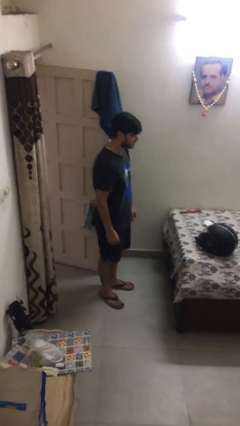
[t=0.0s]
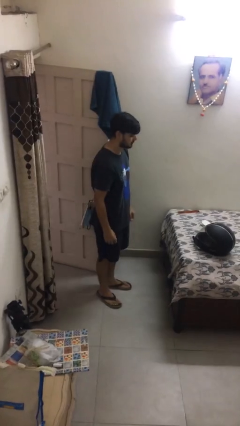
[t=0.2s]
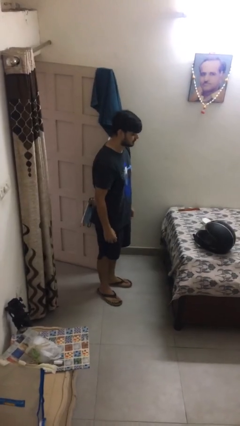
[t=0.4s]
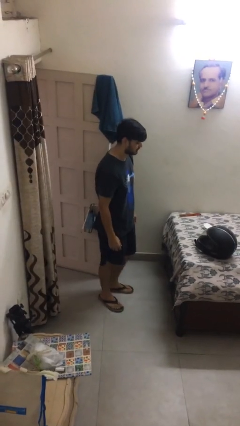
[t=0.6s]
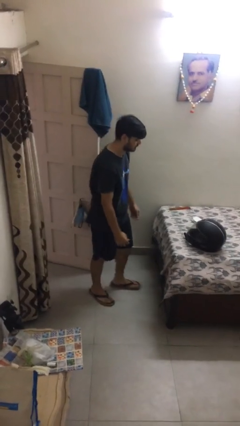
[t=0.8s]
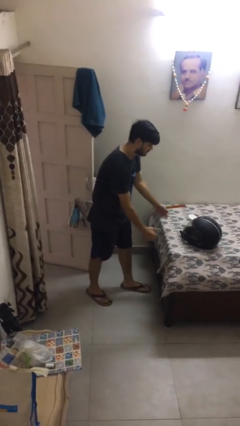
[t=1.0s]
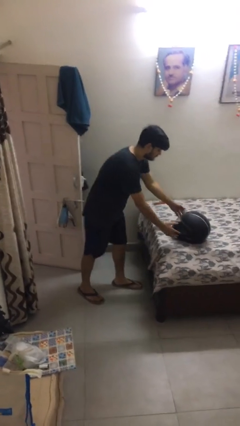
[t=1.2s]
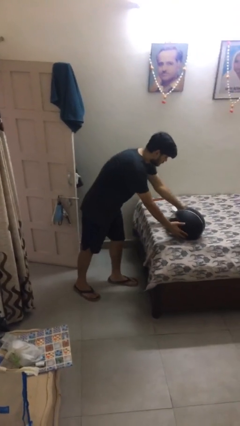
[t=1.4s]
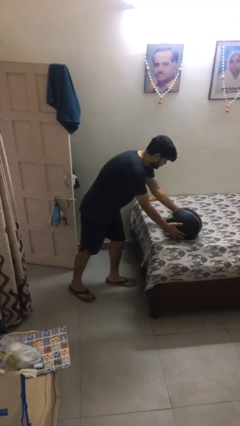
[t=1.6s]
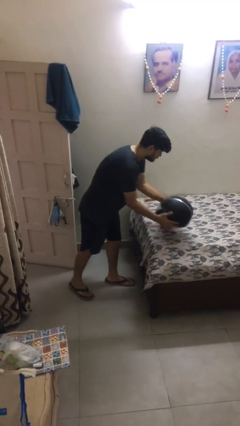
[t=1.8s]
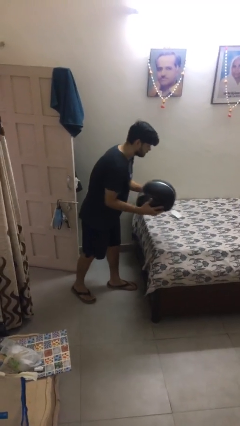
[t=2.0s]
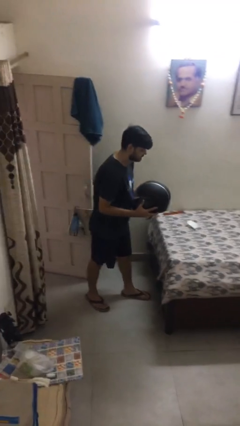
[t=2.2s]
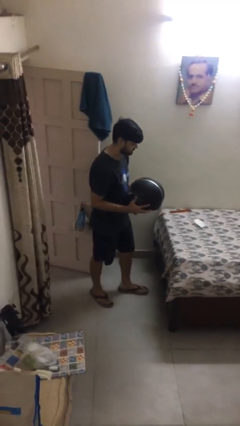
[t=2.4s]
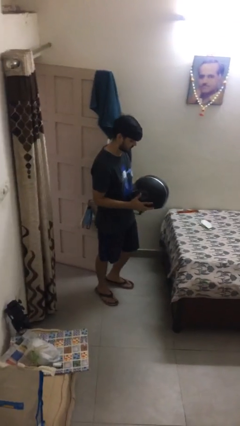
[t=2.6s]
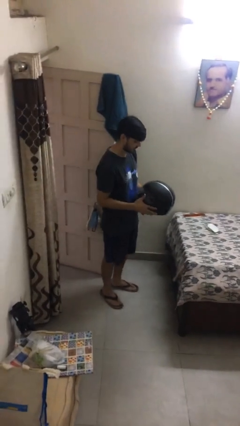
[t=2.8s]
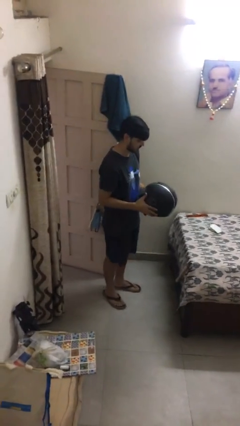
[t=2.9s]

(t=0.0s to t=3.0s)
person picks up object from bed

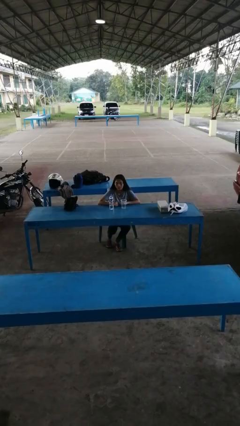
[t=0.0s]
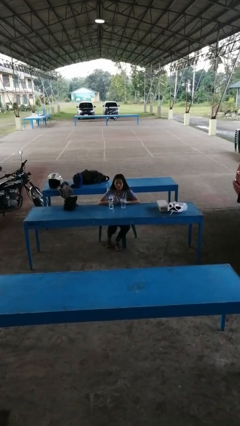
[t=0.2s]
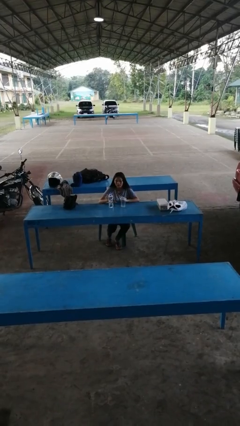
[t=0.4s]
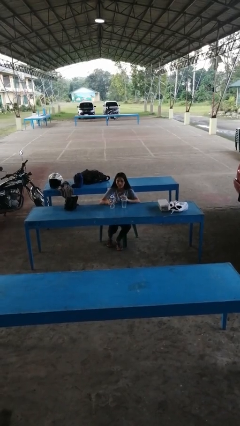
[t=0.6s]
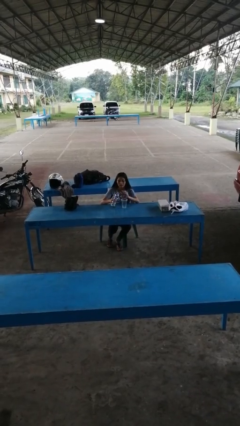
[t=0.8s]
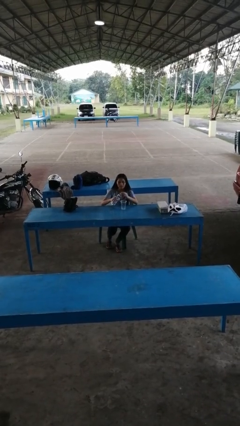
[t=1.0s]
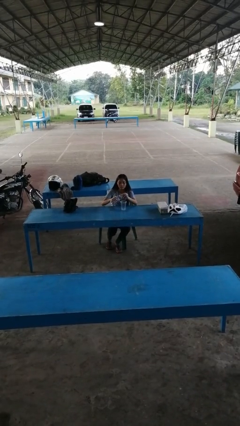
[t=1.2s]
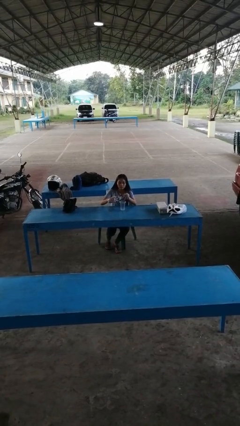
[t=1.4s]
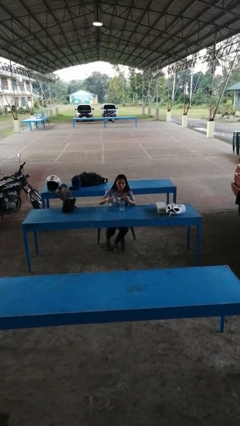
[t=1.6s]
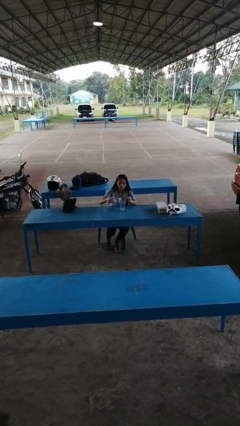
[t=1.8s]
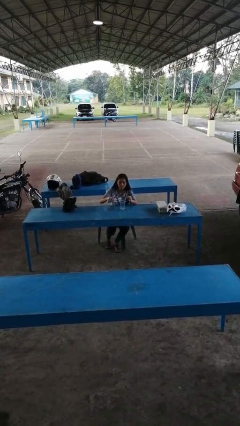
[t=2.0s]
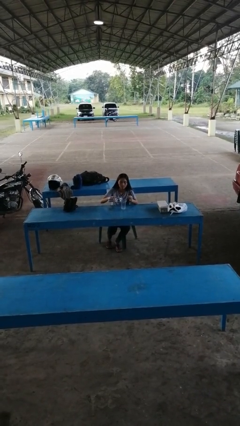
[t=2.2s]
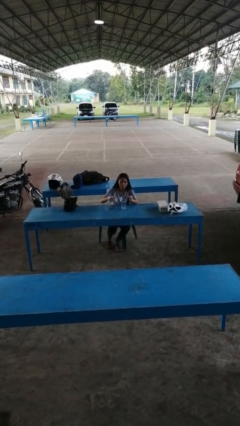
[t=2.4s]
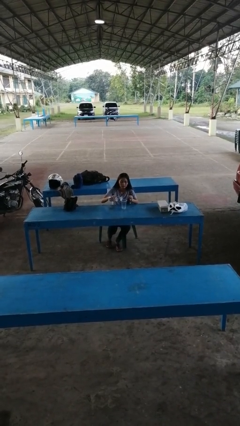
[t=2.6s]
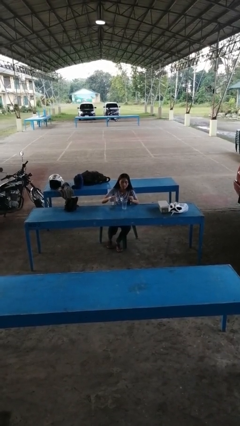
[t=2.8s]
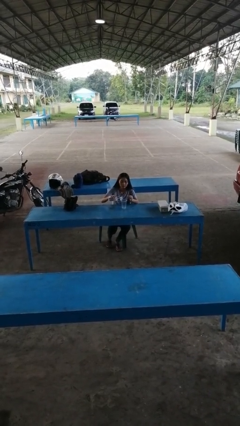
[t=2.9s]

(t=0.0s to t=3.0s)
person pours liquid into cup

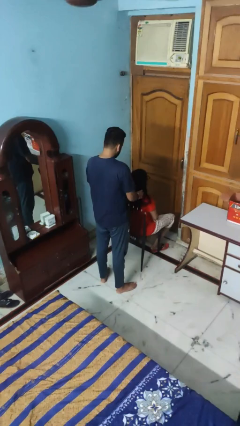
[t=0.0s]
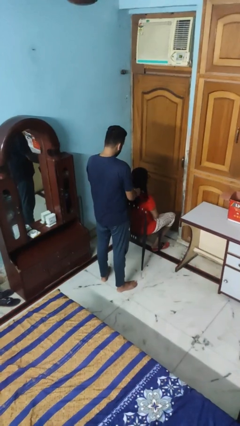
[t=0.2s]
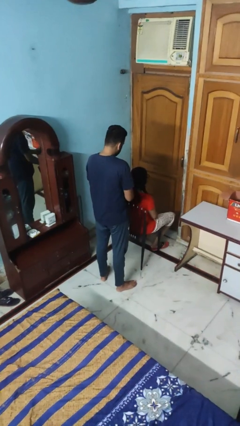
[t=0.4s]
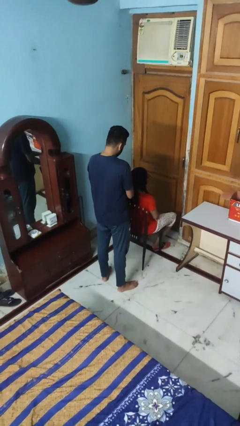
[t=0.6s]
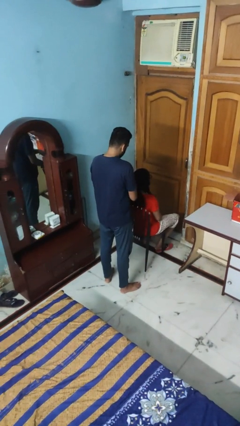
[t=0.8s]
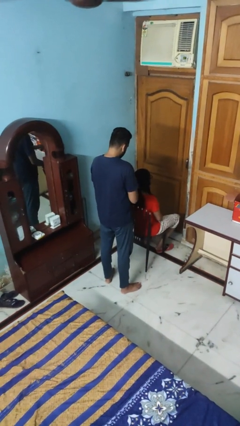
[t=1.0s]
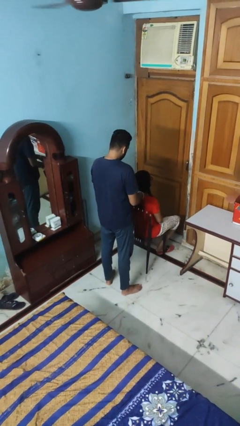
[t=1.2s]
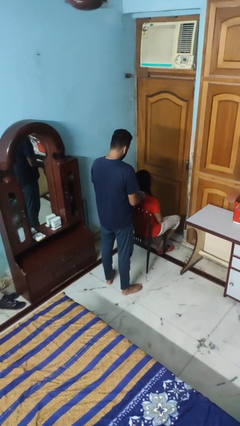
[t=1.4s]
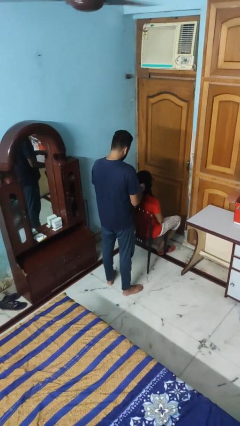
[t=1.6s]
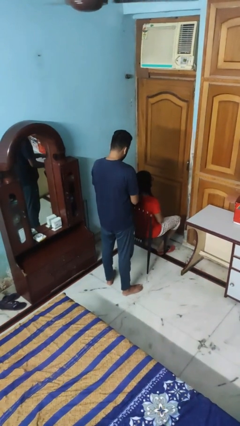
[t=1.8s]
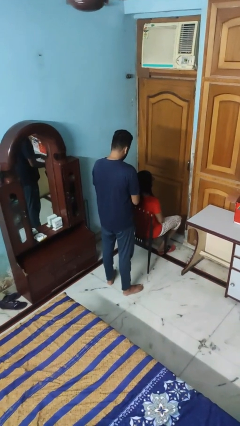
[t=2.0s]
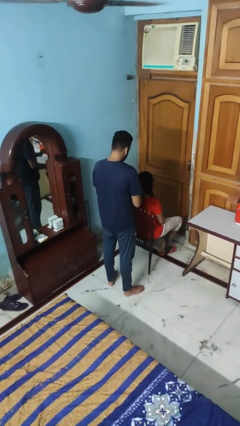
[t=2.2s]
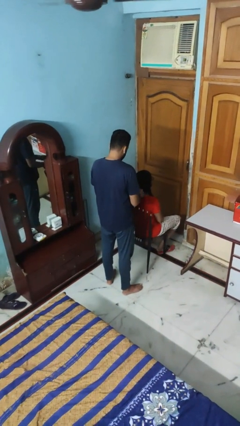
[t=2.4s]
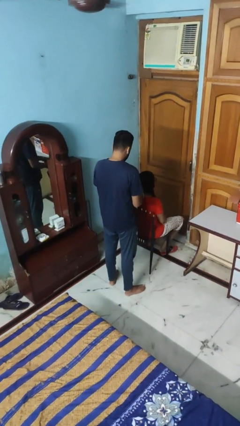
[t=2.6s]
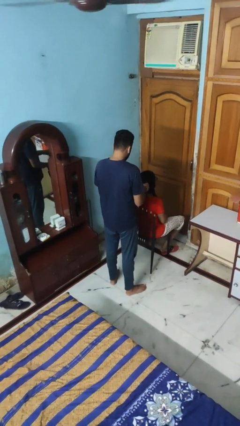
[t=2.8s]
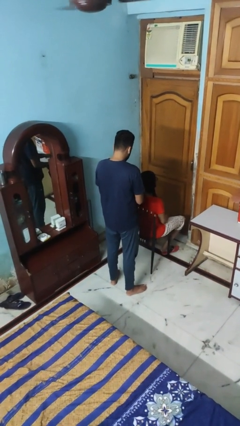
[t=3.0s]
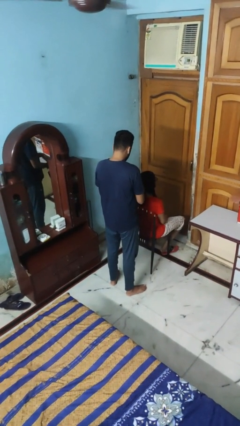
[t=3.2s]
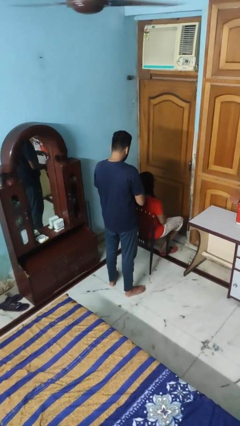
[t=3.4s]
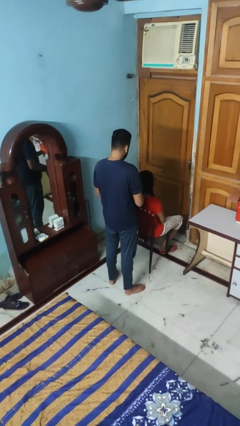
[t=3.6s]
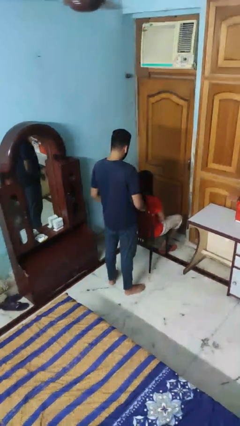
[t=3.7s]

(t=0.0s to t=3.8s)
person braids hair of person

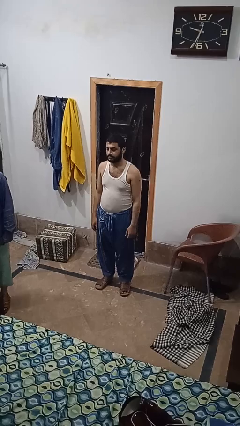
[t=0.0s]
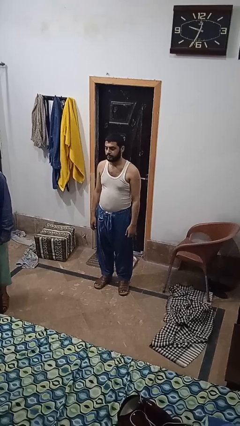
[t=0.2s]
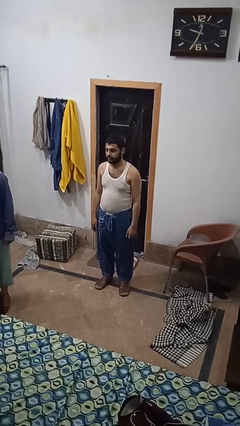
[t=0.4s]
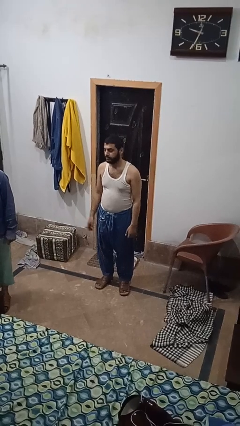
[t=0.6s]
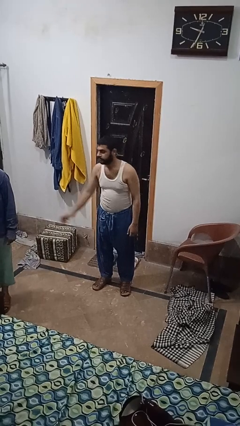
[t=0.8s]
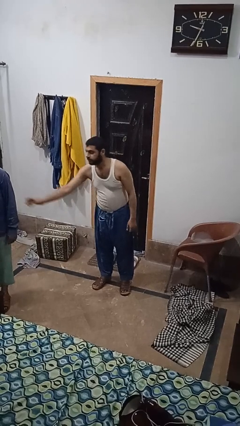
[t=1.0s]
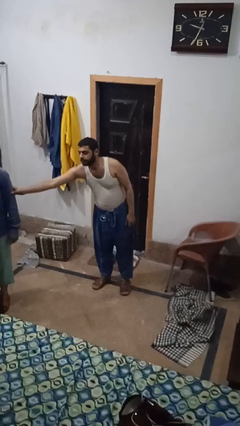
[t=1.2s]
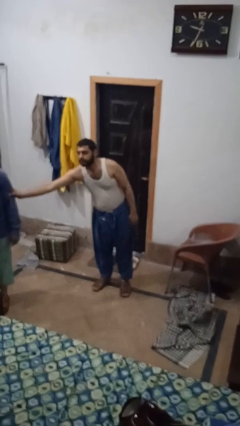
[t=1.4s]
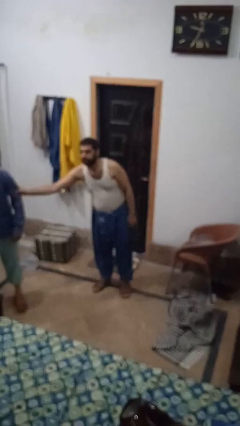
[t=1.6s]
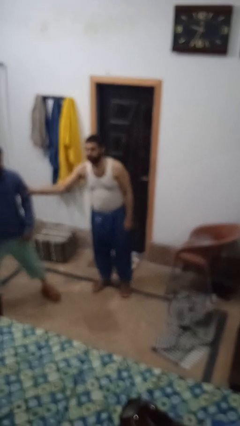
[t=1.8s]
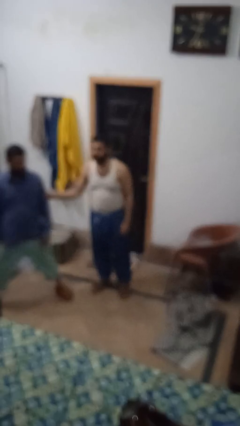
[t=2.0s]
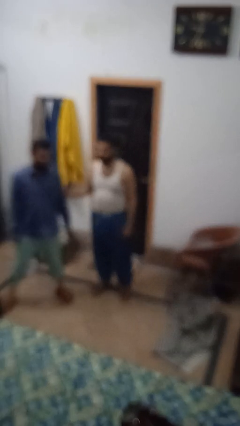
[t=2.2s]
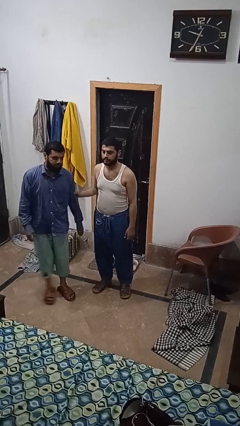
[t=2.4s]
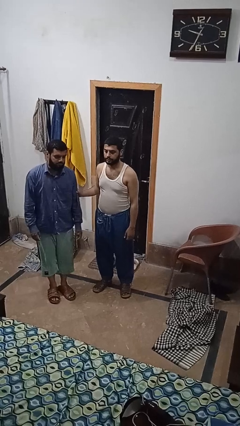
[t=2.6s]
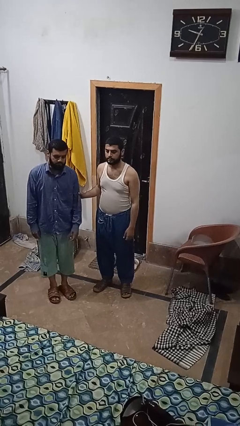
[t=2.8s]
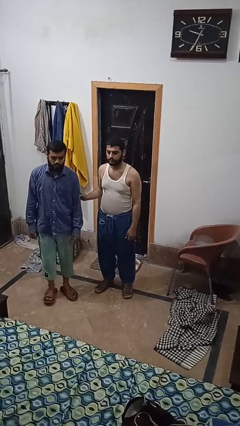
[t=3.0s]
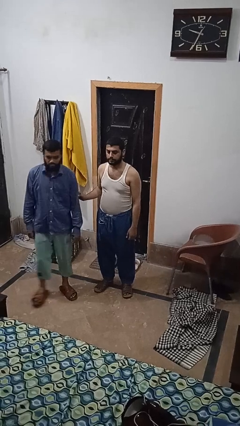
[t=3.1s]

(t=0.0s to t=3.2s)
person grabs person by bicep

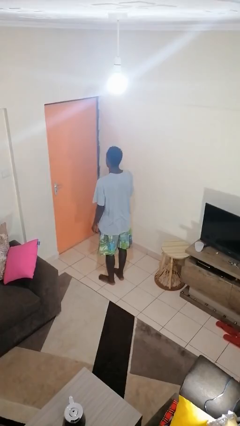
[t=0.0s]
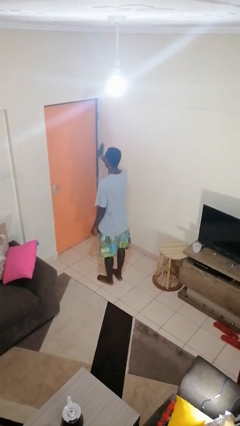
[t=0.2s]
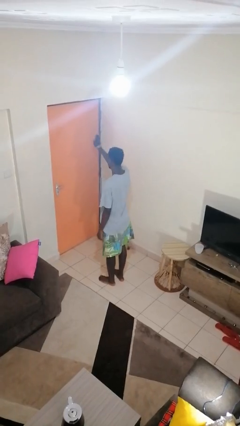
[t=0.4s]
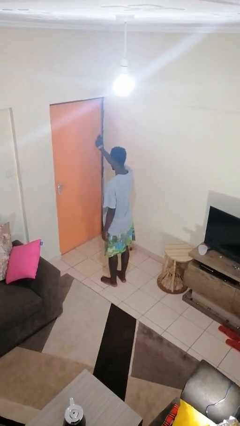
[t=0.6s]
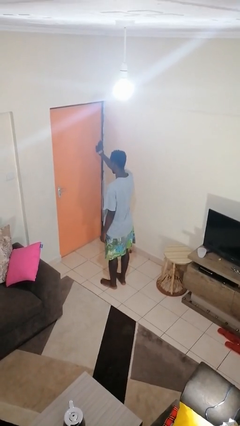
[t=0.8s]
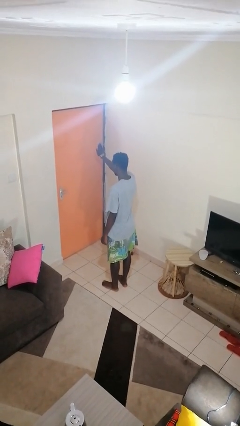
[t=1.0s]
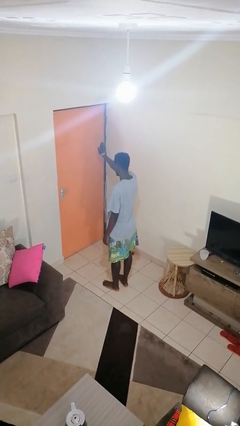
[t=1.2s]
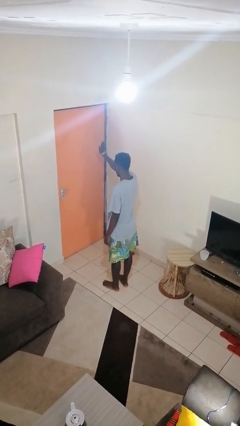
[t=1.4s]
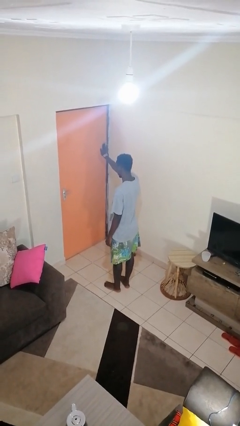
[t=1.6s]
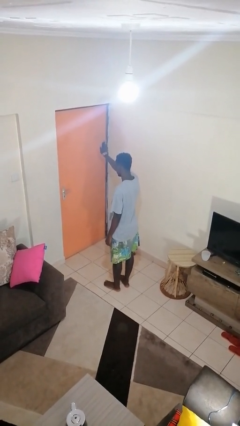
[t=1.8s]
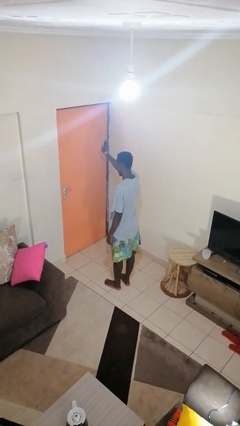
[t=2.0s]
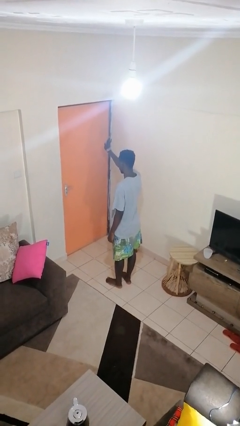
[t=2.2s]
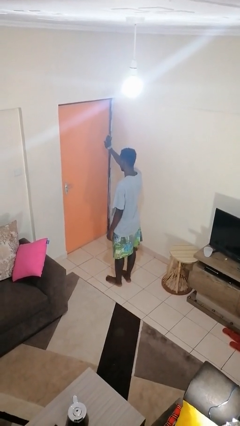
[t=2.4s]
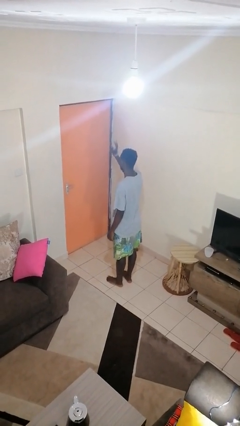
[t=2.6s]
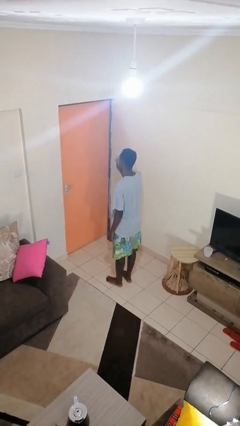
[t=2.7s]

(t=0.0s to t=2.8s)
person gestures stop

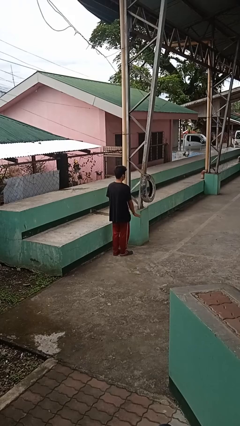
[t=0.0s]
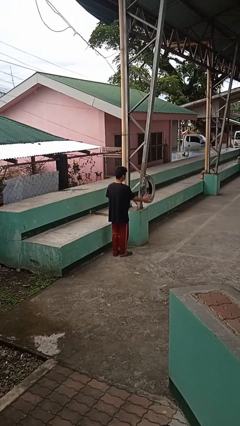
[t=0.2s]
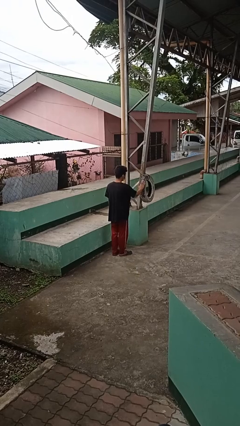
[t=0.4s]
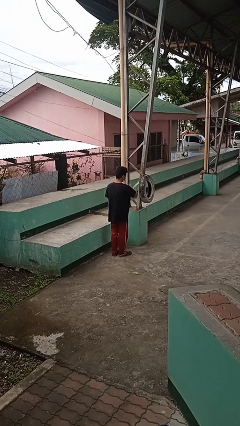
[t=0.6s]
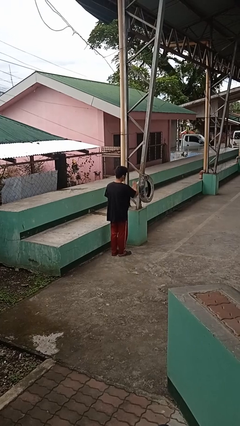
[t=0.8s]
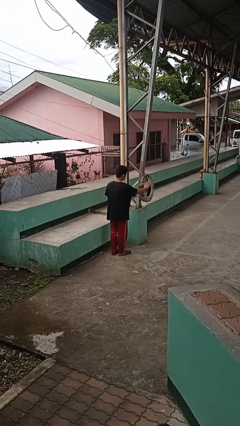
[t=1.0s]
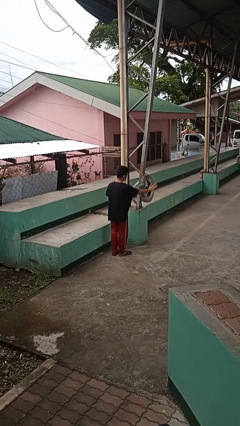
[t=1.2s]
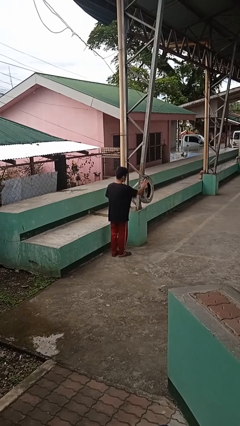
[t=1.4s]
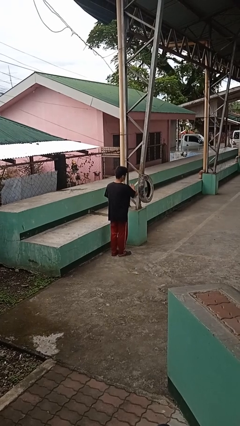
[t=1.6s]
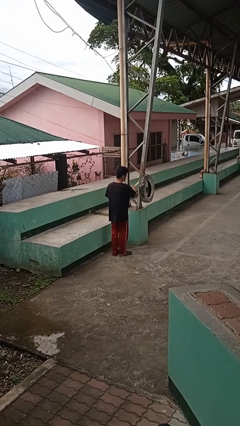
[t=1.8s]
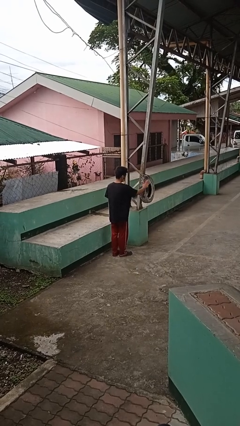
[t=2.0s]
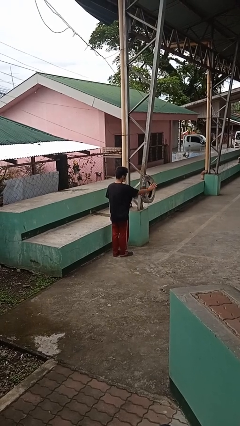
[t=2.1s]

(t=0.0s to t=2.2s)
person waves hand over object
